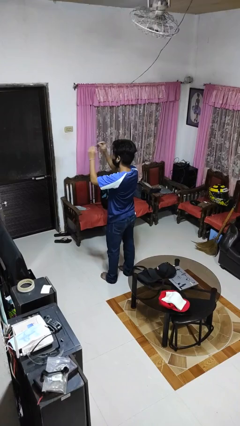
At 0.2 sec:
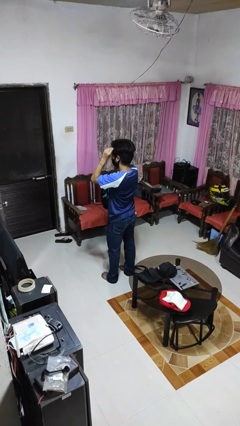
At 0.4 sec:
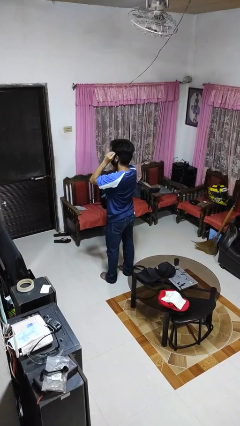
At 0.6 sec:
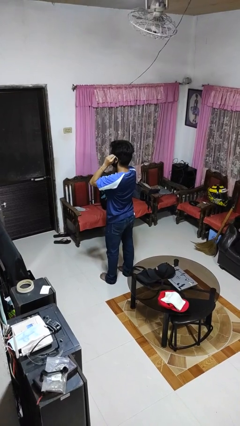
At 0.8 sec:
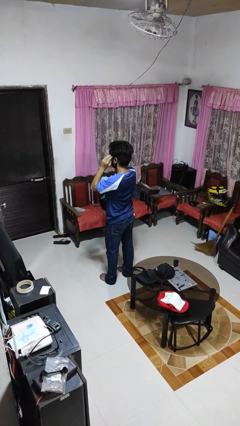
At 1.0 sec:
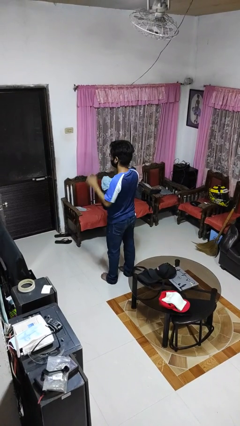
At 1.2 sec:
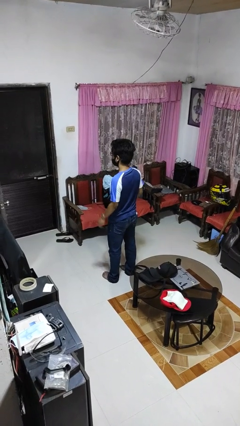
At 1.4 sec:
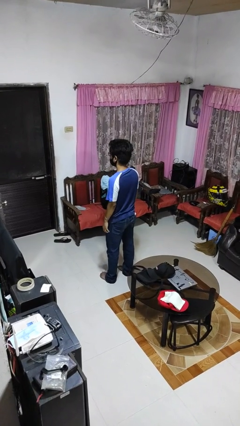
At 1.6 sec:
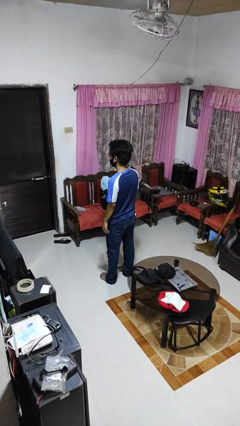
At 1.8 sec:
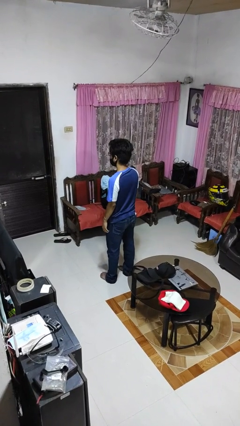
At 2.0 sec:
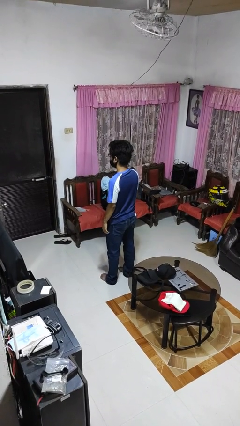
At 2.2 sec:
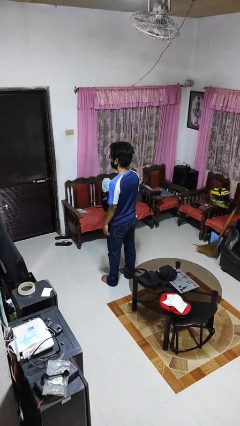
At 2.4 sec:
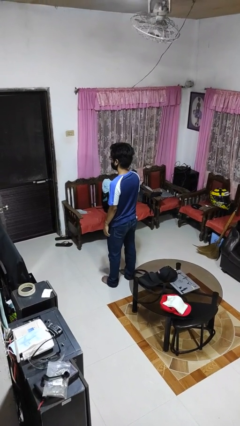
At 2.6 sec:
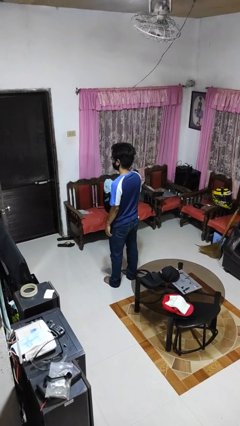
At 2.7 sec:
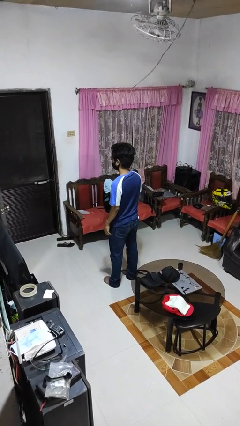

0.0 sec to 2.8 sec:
person puts on glasses

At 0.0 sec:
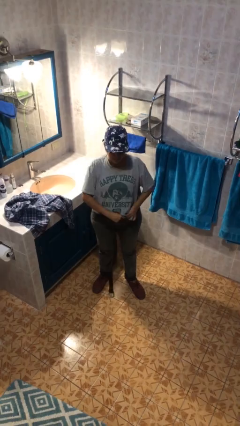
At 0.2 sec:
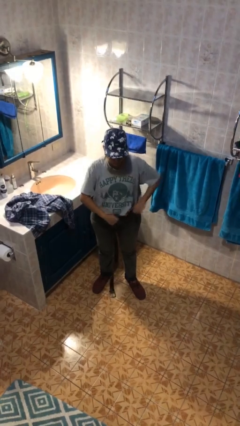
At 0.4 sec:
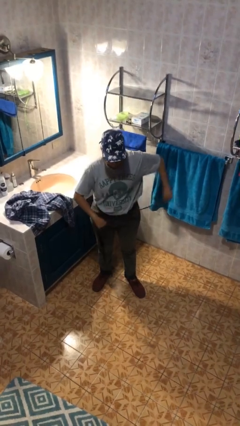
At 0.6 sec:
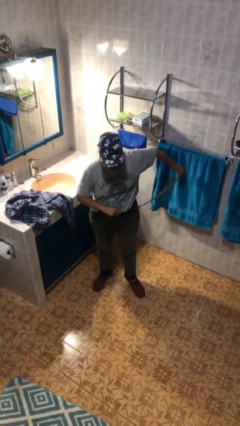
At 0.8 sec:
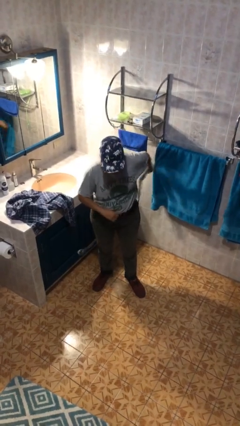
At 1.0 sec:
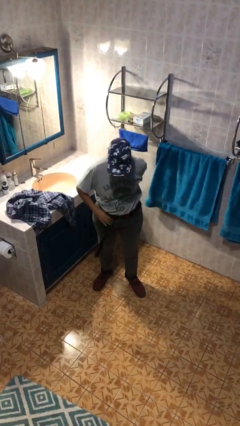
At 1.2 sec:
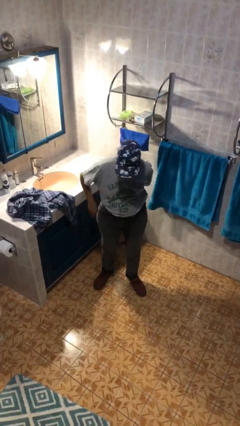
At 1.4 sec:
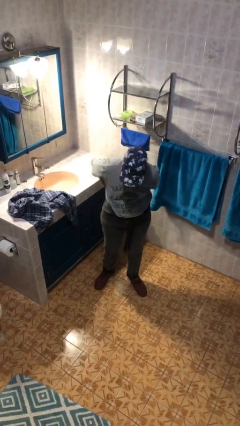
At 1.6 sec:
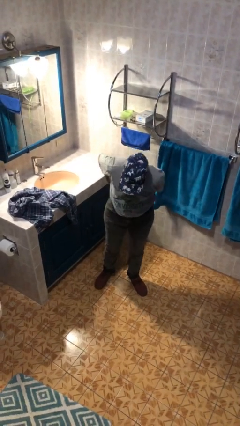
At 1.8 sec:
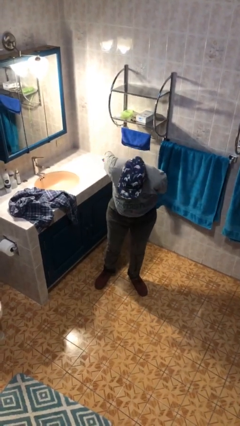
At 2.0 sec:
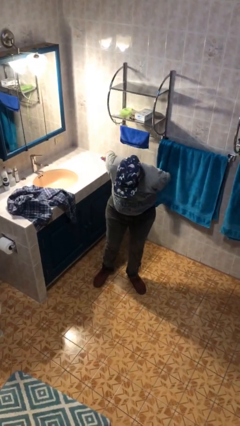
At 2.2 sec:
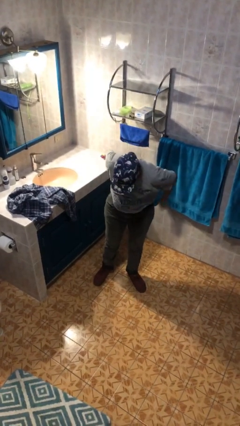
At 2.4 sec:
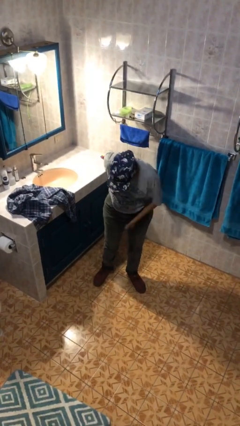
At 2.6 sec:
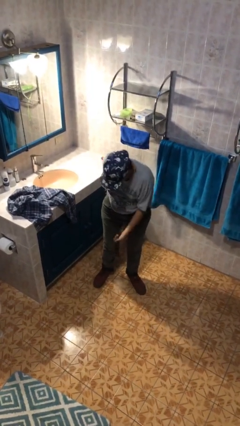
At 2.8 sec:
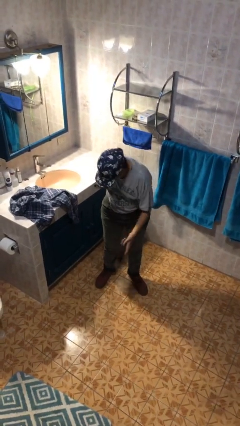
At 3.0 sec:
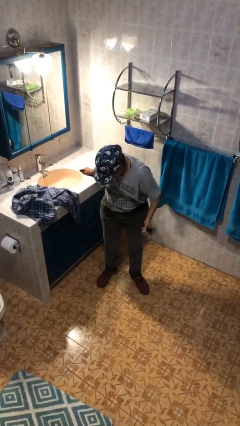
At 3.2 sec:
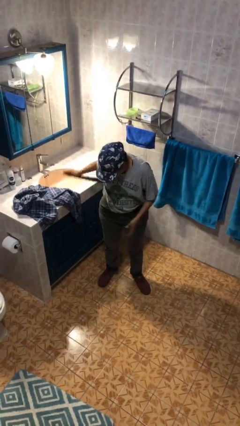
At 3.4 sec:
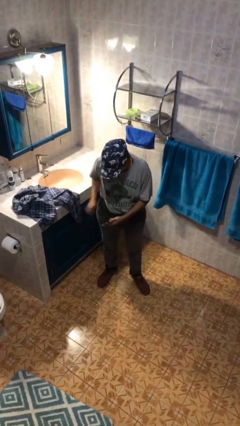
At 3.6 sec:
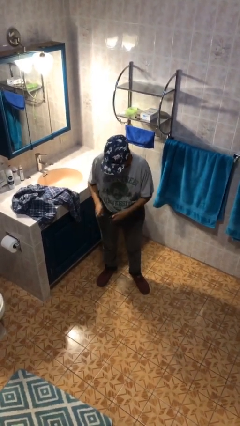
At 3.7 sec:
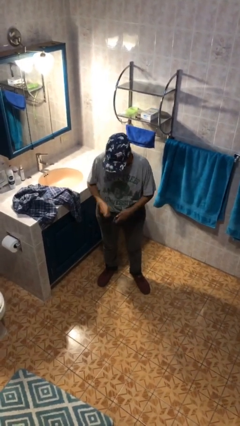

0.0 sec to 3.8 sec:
person puts on belt

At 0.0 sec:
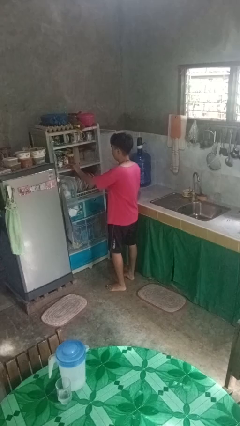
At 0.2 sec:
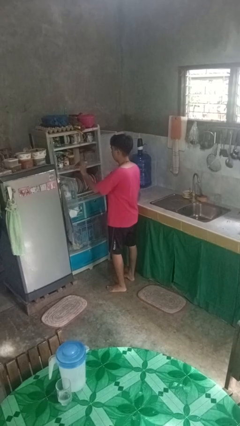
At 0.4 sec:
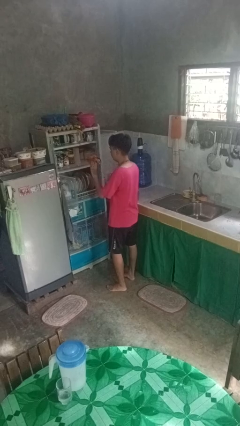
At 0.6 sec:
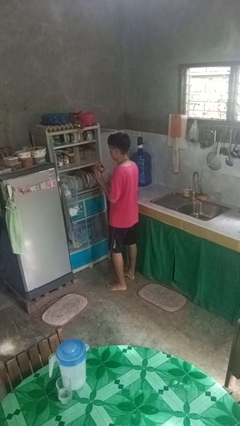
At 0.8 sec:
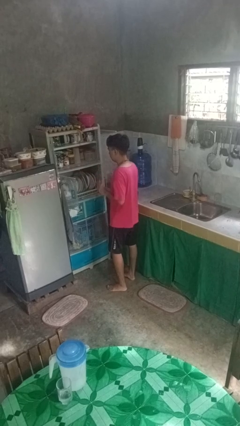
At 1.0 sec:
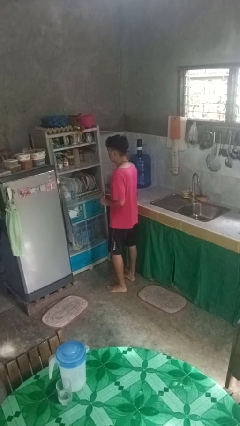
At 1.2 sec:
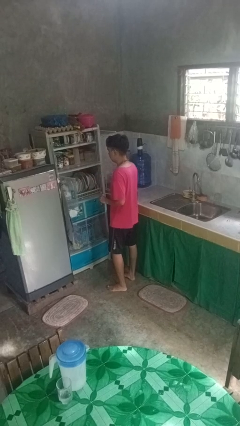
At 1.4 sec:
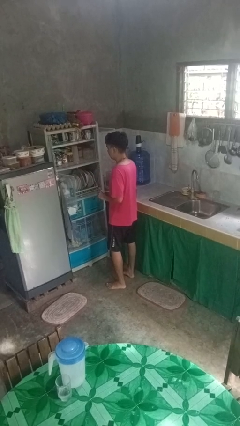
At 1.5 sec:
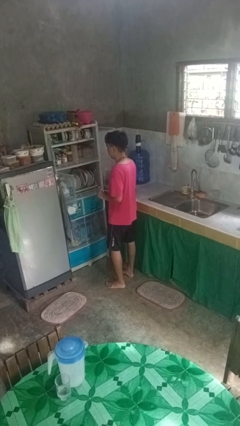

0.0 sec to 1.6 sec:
person takes object from cabinet

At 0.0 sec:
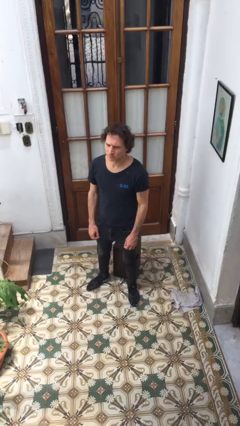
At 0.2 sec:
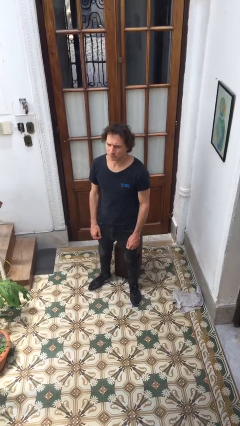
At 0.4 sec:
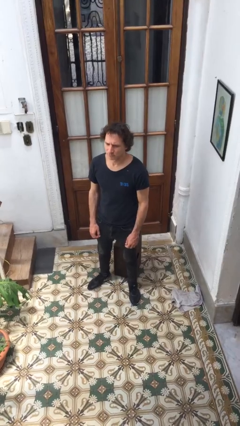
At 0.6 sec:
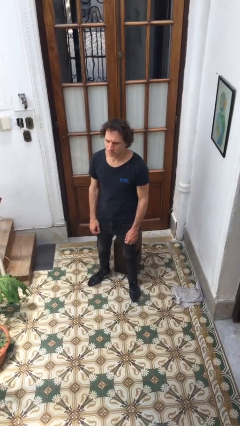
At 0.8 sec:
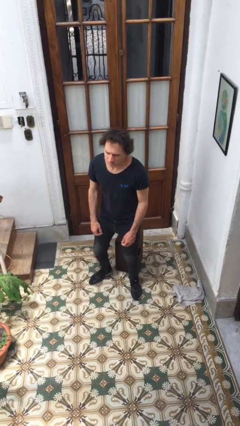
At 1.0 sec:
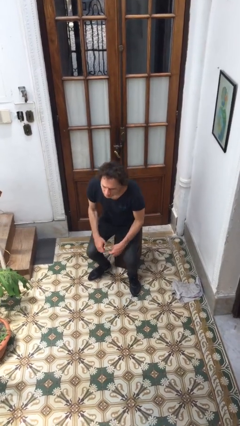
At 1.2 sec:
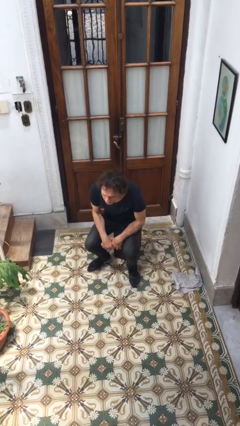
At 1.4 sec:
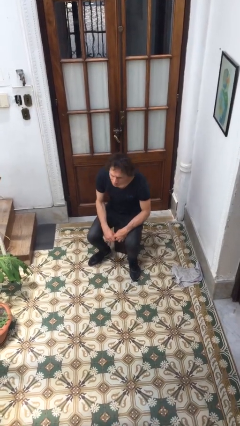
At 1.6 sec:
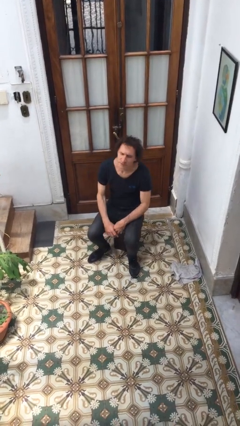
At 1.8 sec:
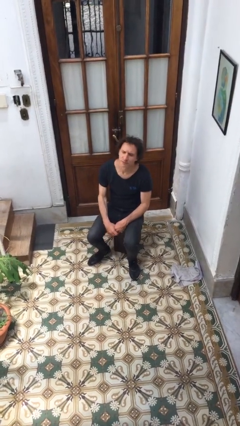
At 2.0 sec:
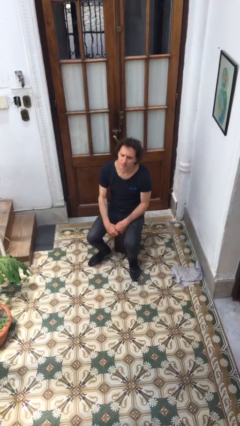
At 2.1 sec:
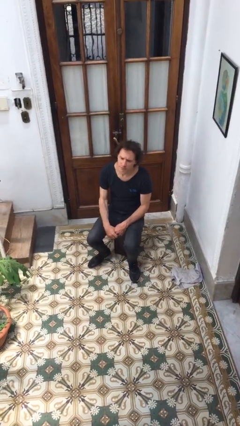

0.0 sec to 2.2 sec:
person sits down

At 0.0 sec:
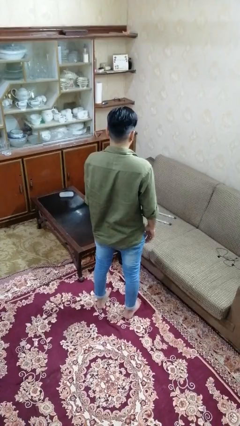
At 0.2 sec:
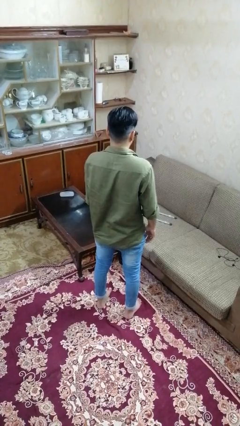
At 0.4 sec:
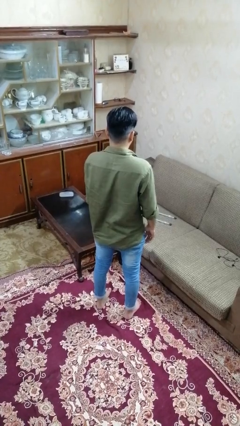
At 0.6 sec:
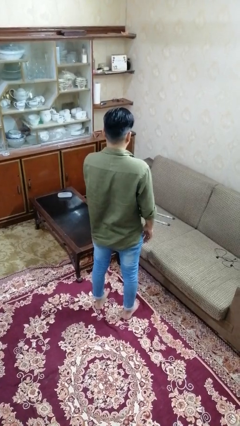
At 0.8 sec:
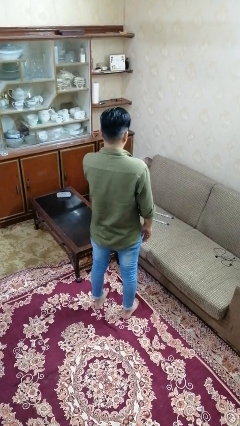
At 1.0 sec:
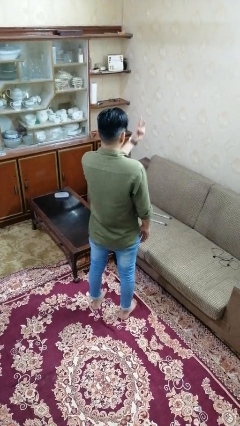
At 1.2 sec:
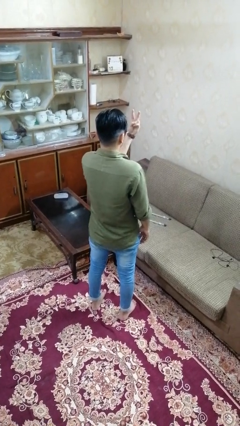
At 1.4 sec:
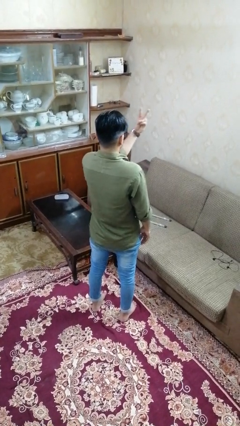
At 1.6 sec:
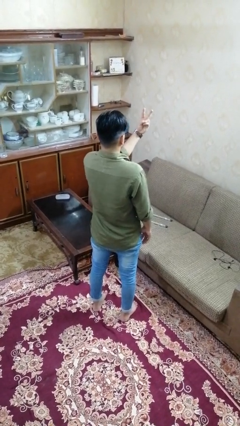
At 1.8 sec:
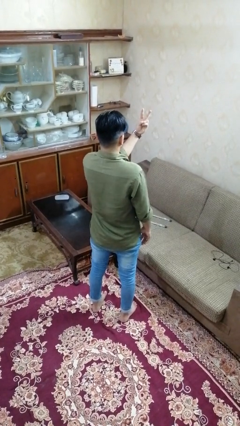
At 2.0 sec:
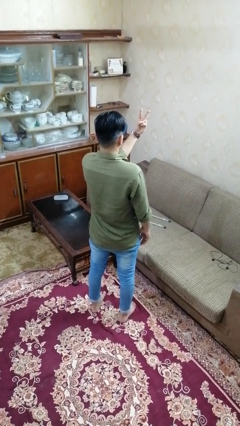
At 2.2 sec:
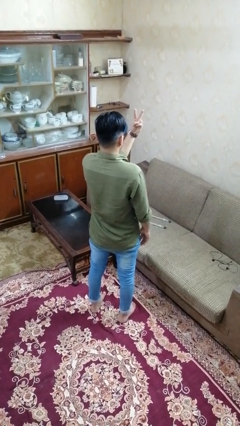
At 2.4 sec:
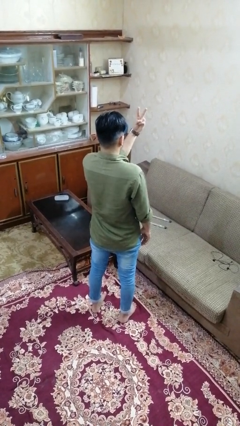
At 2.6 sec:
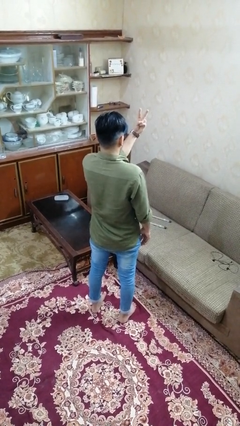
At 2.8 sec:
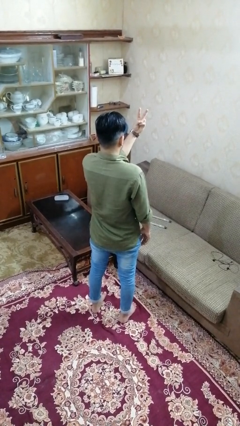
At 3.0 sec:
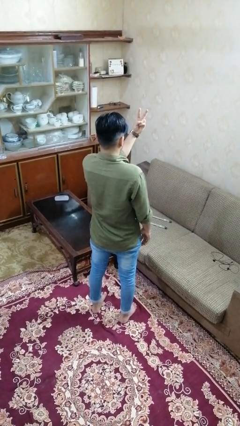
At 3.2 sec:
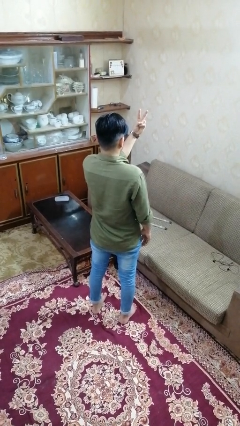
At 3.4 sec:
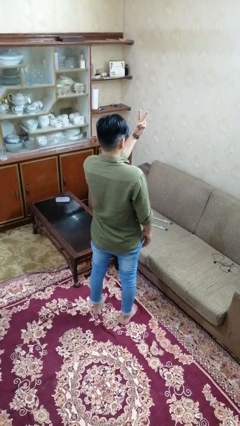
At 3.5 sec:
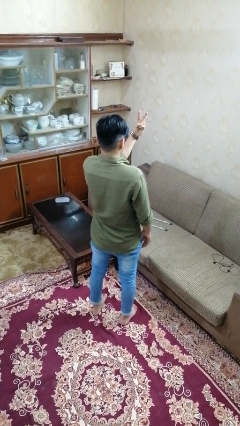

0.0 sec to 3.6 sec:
person gestures peace

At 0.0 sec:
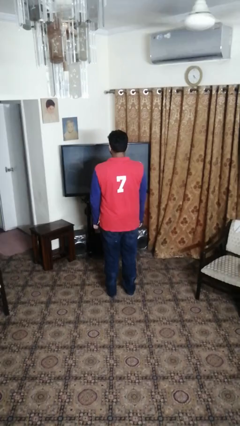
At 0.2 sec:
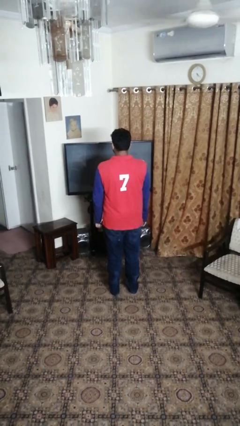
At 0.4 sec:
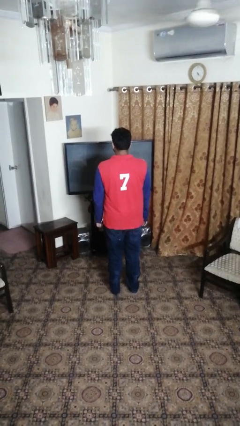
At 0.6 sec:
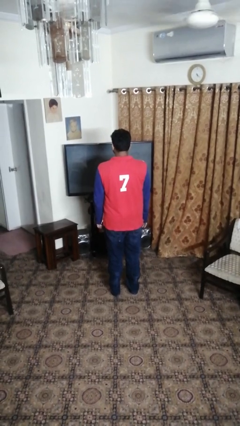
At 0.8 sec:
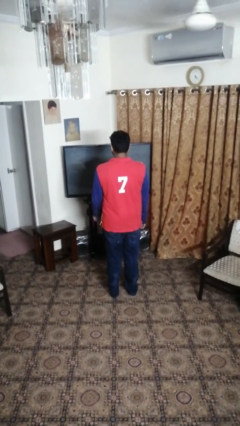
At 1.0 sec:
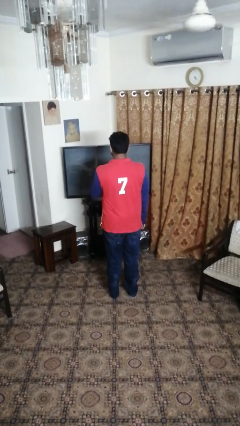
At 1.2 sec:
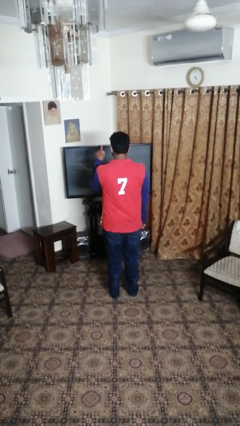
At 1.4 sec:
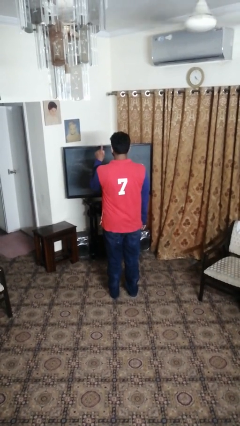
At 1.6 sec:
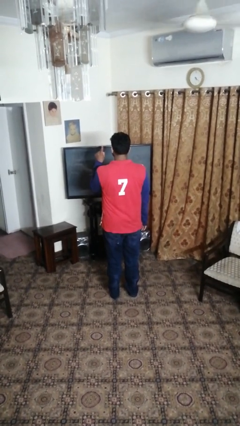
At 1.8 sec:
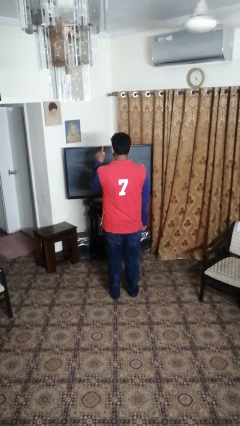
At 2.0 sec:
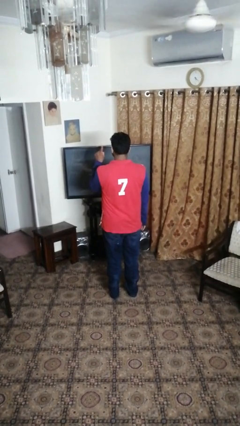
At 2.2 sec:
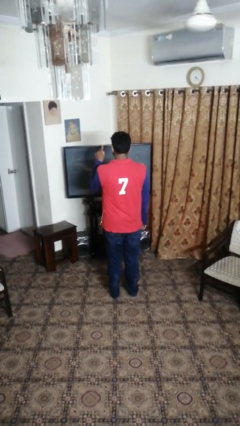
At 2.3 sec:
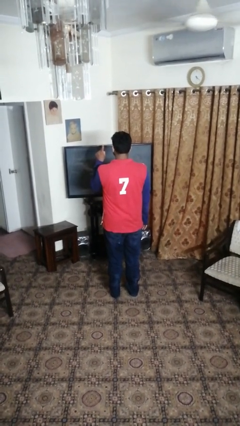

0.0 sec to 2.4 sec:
person gestures number one

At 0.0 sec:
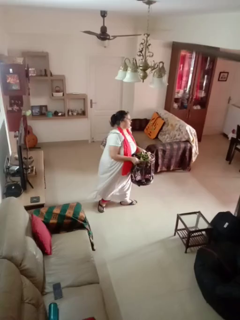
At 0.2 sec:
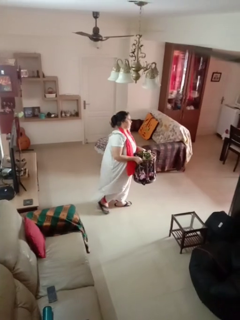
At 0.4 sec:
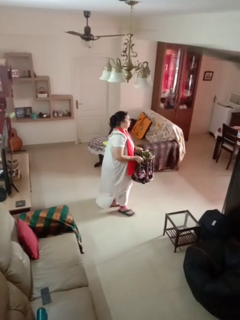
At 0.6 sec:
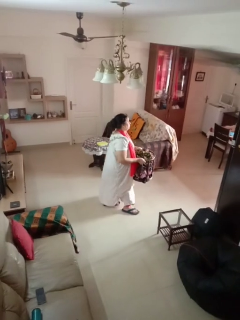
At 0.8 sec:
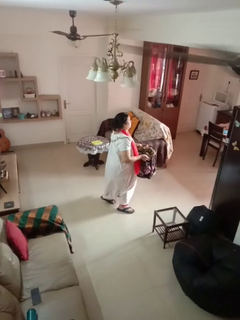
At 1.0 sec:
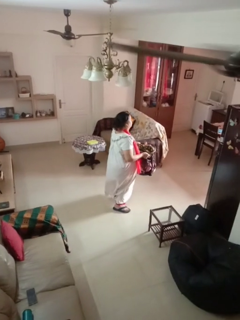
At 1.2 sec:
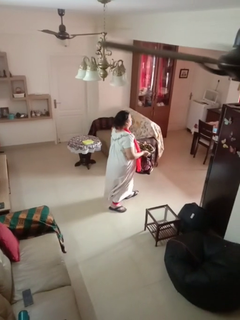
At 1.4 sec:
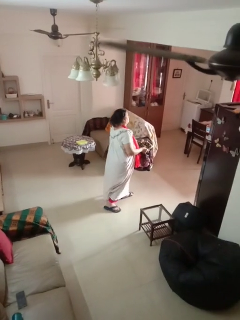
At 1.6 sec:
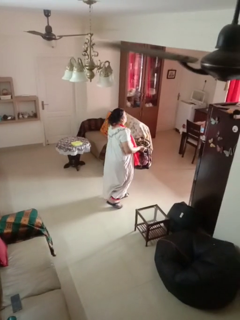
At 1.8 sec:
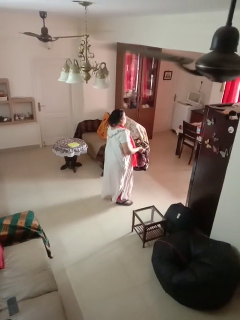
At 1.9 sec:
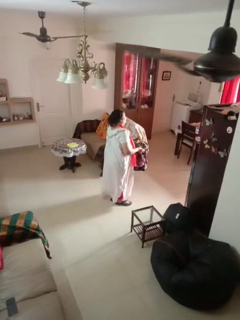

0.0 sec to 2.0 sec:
person carries laundry basket
